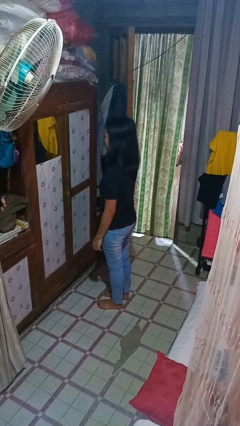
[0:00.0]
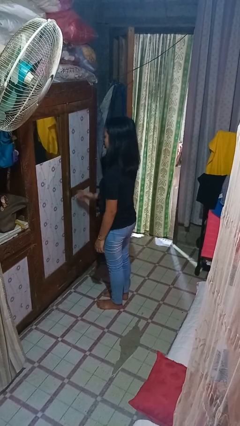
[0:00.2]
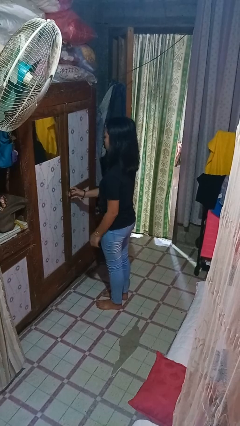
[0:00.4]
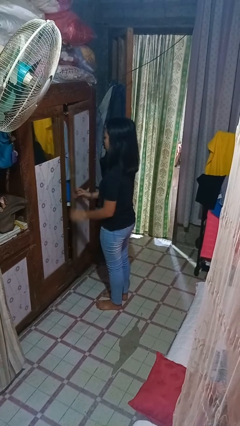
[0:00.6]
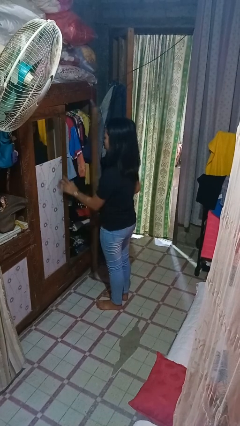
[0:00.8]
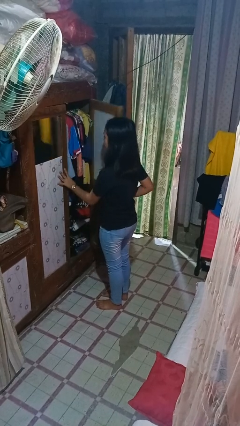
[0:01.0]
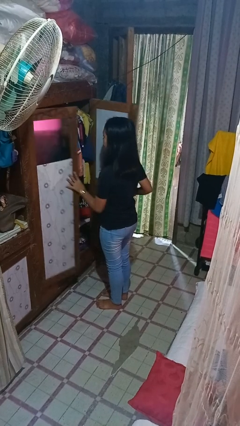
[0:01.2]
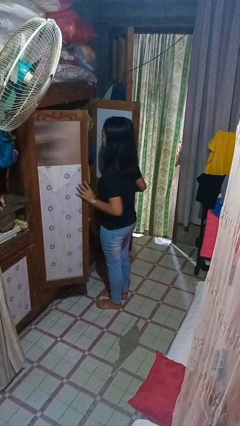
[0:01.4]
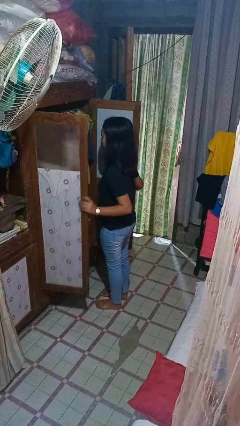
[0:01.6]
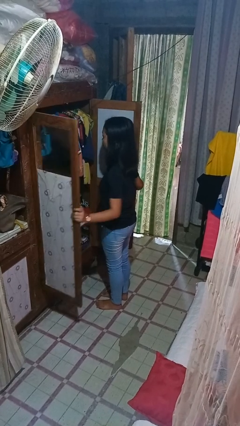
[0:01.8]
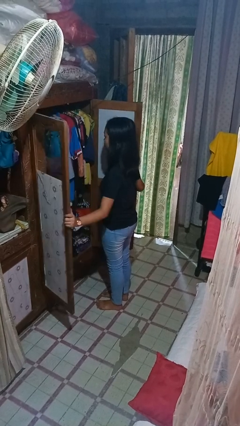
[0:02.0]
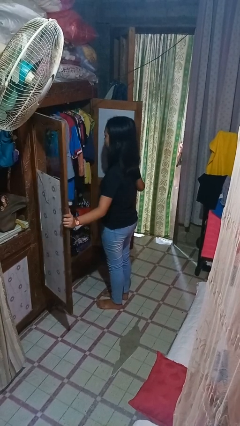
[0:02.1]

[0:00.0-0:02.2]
person opens closet door

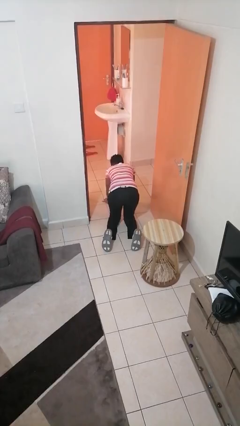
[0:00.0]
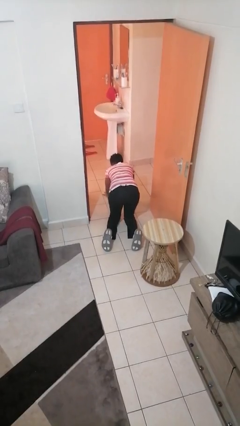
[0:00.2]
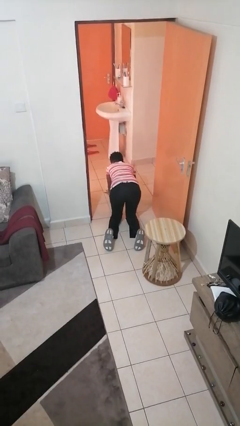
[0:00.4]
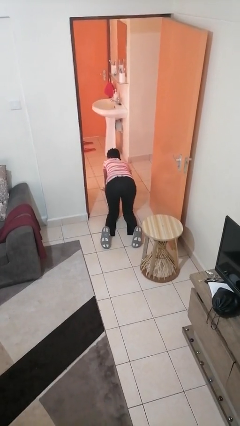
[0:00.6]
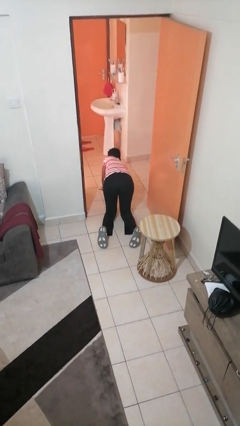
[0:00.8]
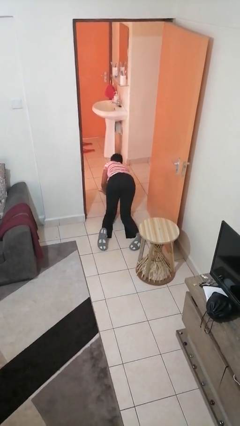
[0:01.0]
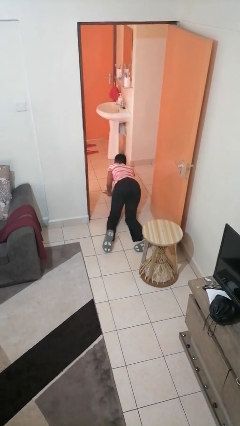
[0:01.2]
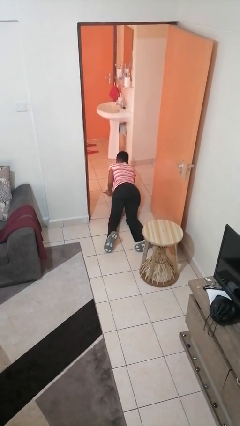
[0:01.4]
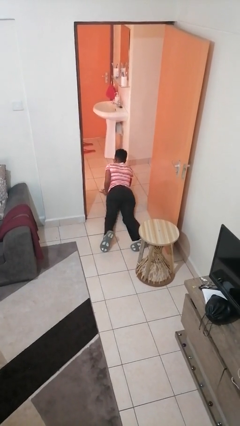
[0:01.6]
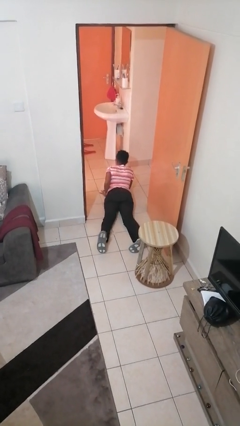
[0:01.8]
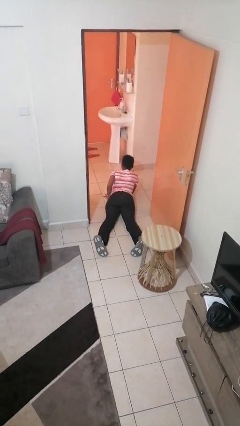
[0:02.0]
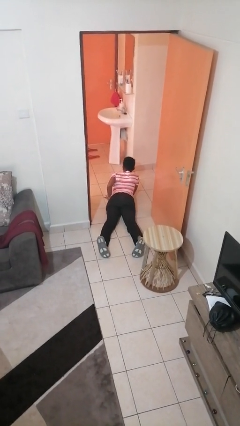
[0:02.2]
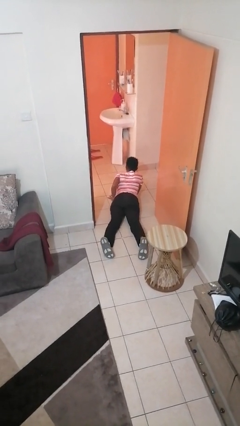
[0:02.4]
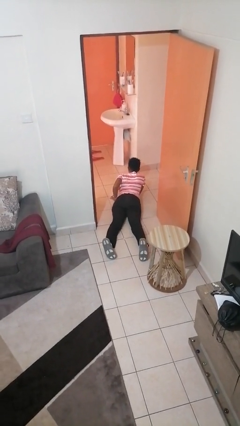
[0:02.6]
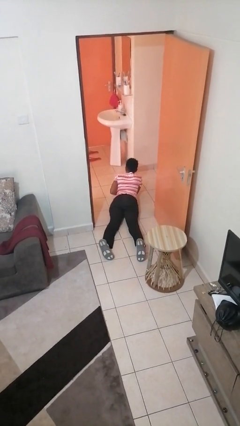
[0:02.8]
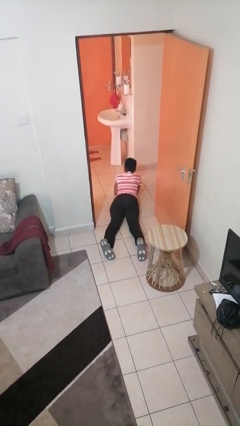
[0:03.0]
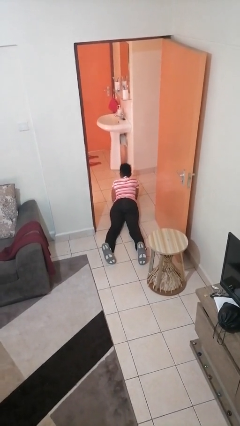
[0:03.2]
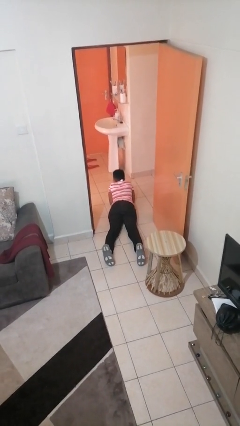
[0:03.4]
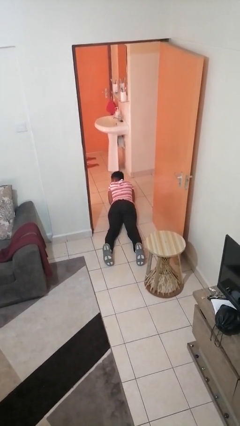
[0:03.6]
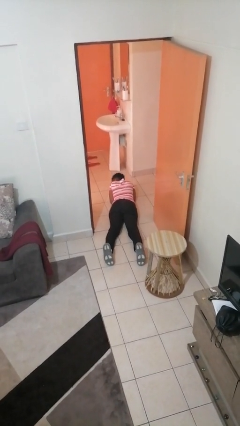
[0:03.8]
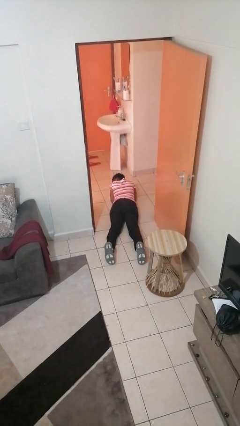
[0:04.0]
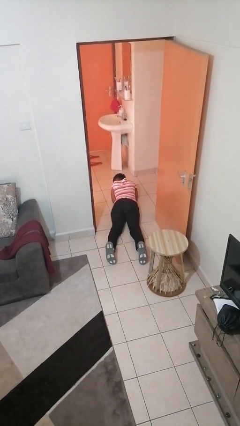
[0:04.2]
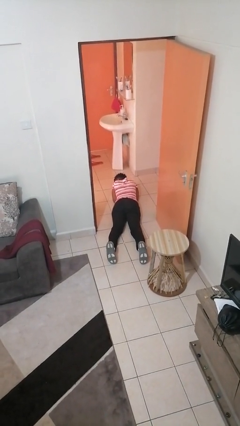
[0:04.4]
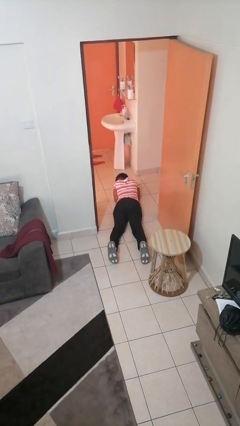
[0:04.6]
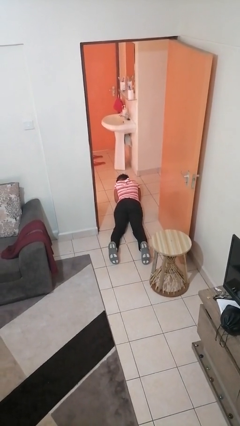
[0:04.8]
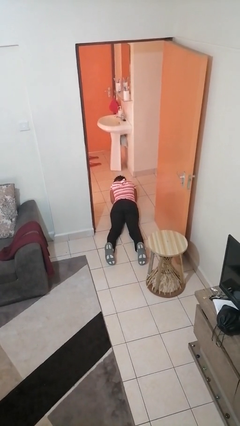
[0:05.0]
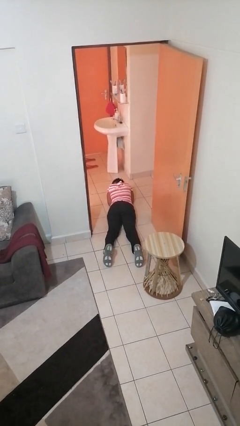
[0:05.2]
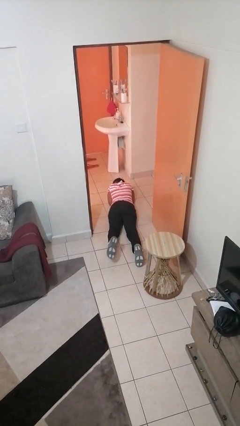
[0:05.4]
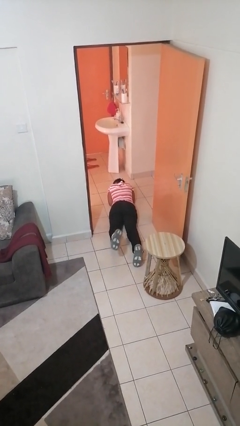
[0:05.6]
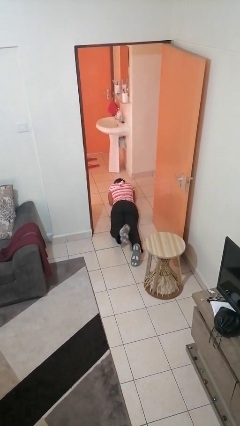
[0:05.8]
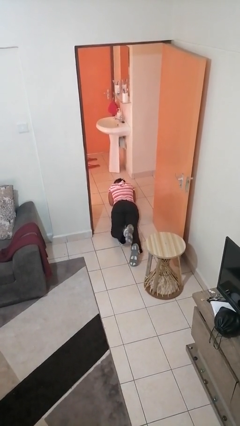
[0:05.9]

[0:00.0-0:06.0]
person lies down on floor

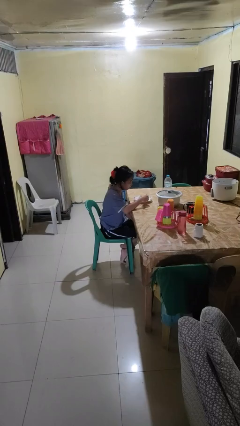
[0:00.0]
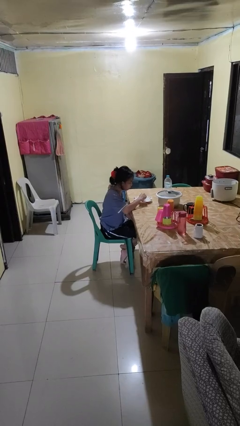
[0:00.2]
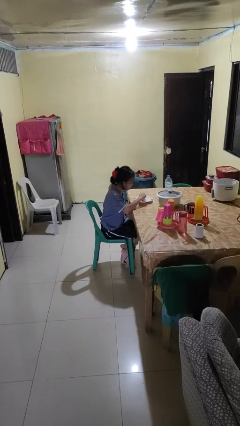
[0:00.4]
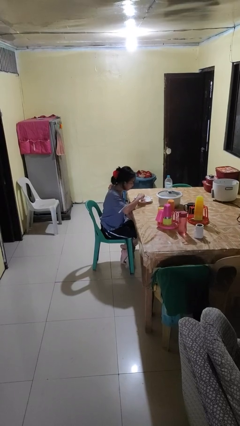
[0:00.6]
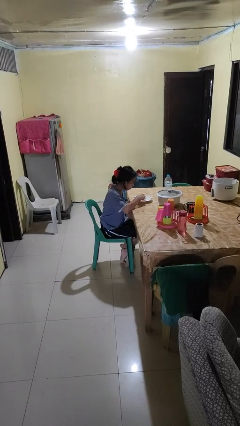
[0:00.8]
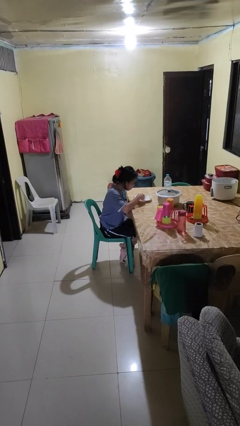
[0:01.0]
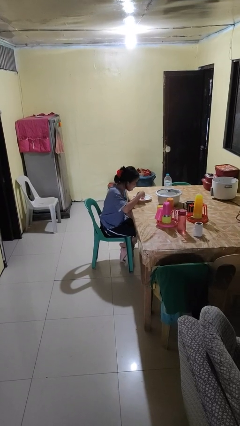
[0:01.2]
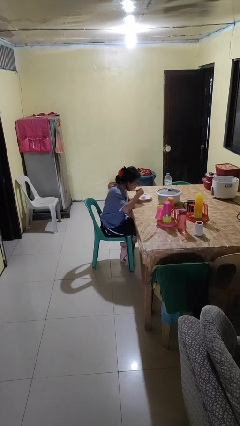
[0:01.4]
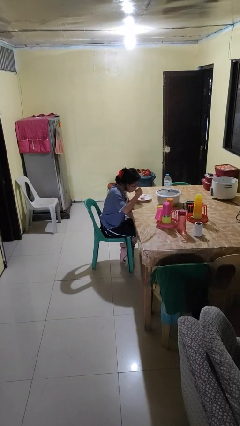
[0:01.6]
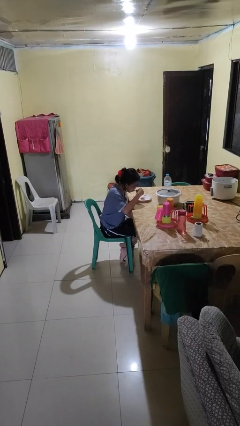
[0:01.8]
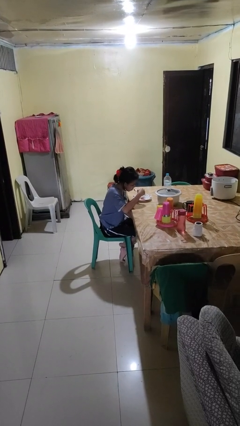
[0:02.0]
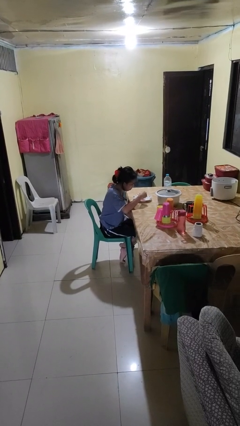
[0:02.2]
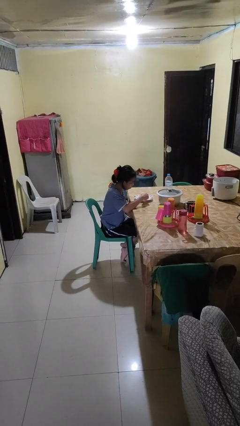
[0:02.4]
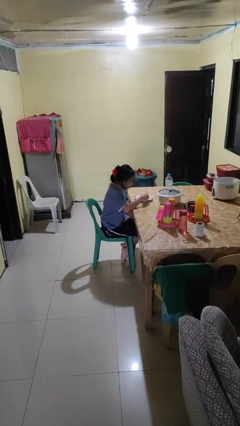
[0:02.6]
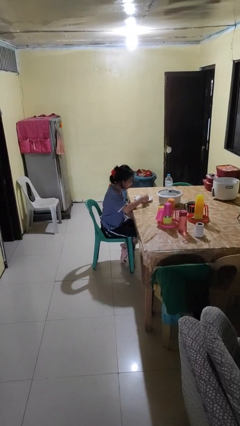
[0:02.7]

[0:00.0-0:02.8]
person eats with utensil

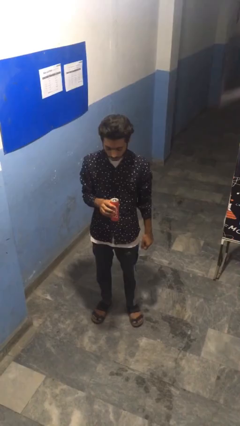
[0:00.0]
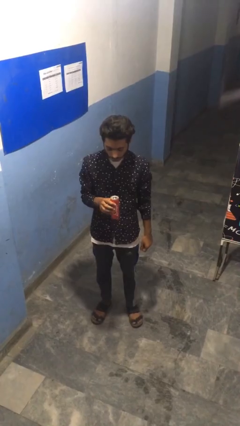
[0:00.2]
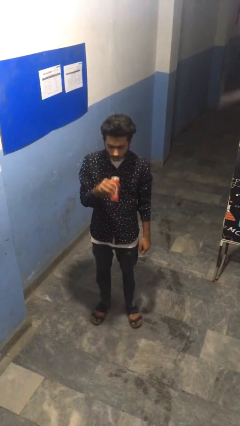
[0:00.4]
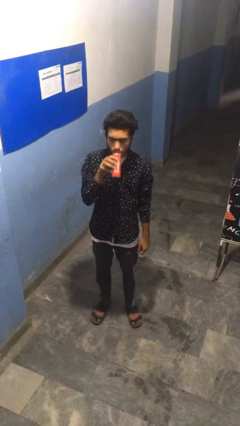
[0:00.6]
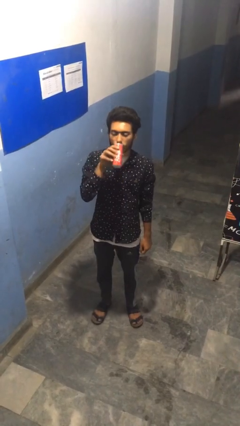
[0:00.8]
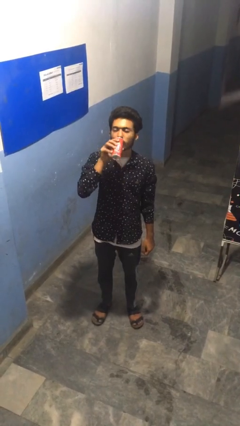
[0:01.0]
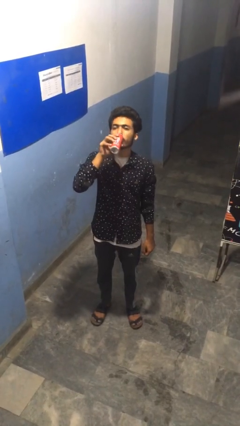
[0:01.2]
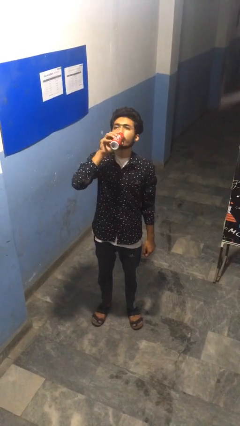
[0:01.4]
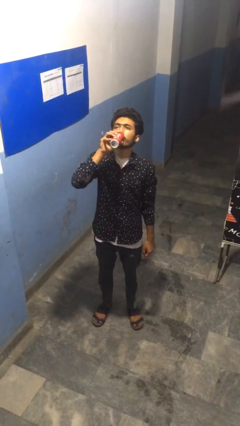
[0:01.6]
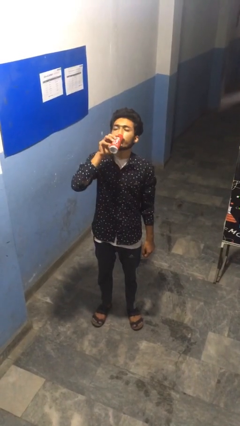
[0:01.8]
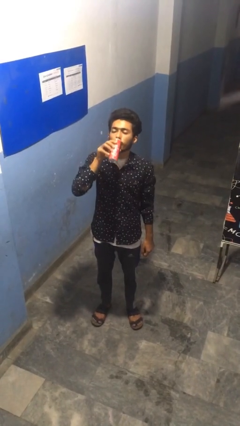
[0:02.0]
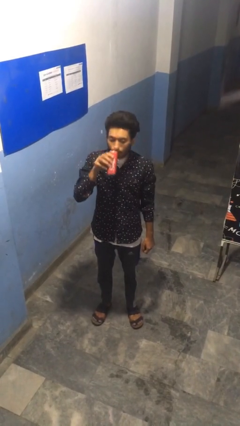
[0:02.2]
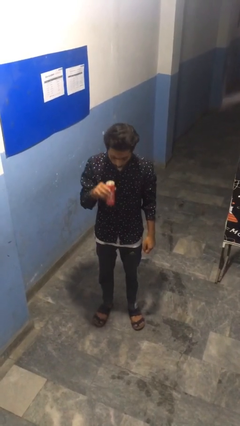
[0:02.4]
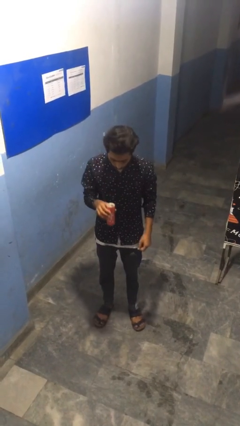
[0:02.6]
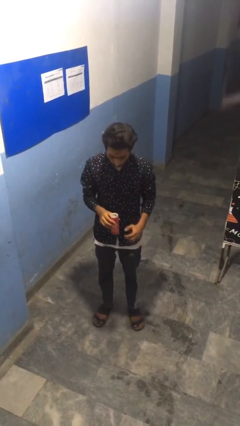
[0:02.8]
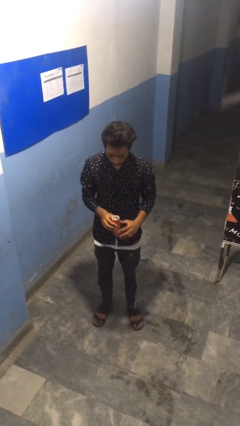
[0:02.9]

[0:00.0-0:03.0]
person drinks from beverage can

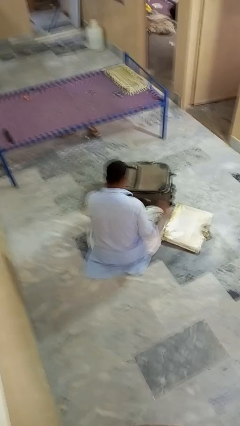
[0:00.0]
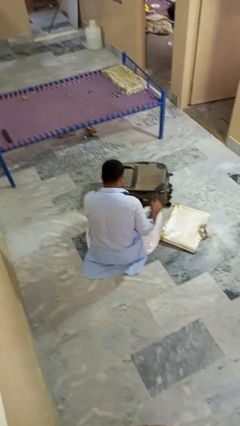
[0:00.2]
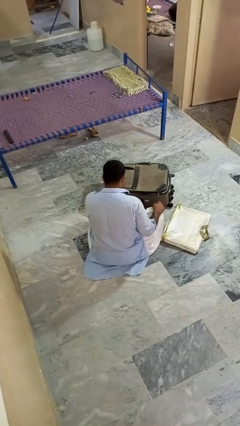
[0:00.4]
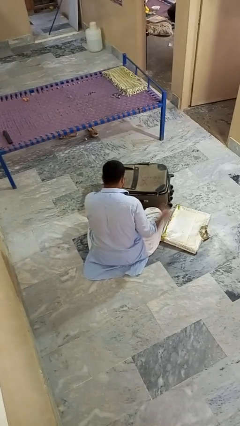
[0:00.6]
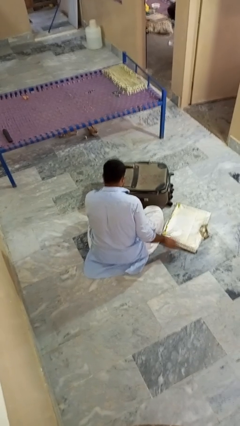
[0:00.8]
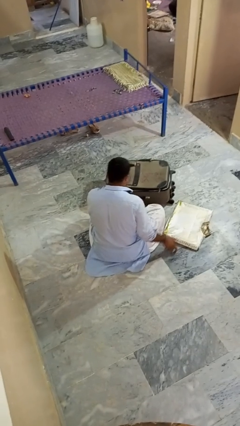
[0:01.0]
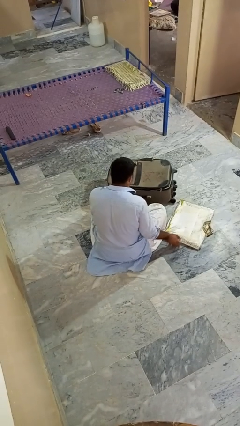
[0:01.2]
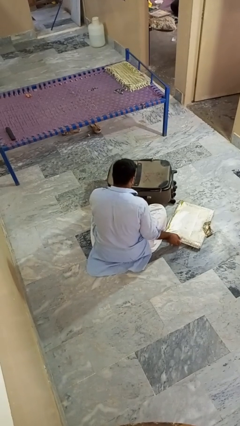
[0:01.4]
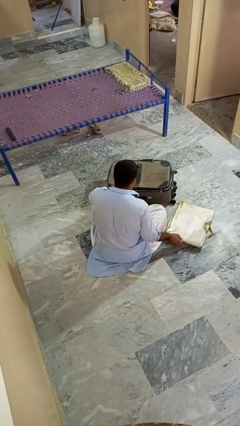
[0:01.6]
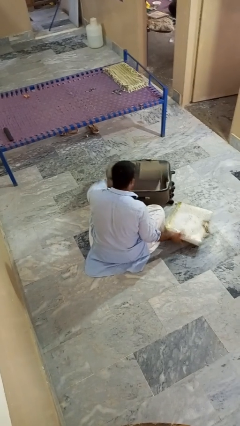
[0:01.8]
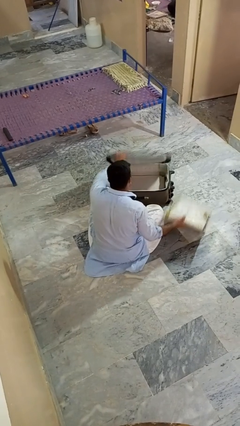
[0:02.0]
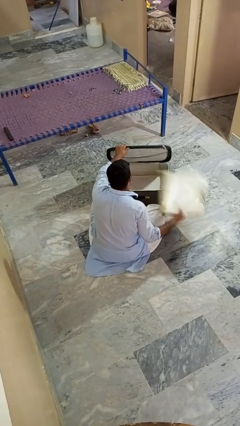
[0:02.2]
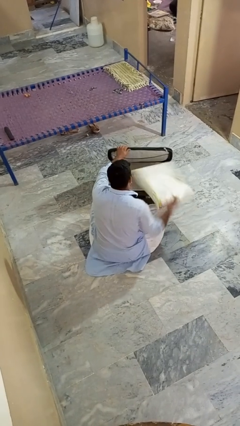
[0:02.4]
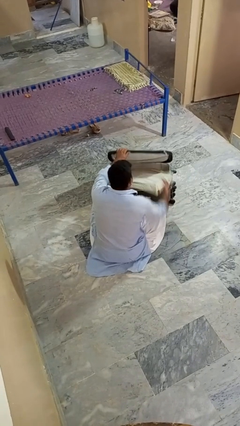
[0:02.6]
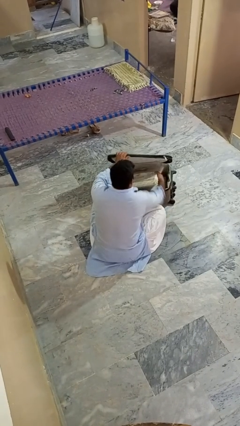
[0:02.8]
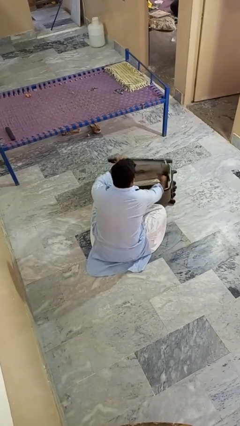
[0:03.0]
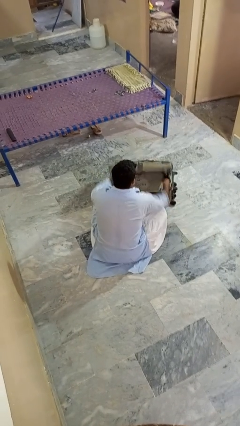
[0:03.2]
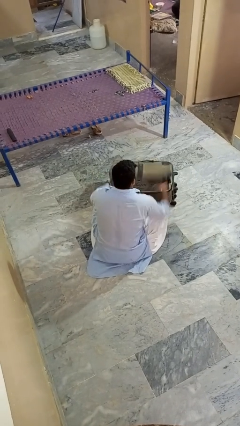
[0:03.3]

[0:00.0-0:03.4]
person puts object into bag

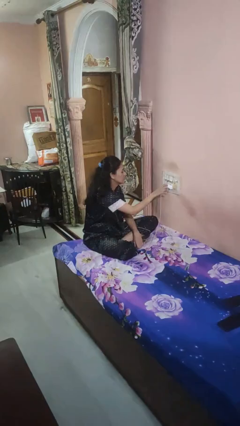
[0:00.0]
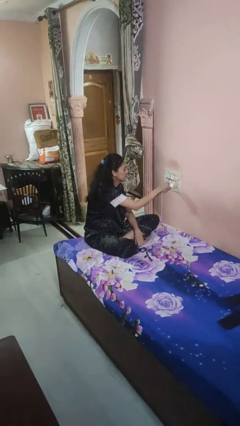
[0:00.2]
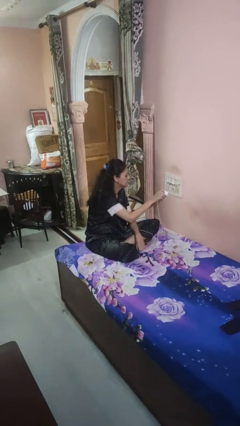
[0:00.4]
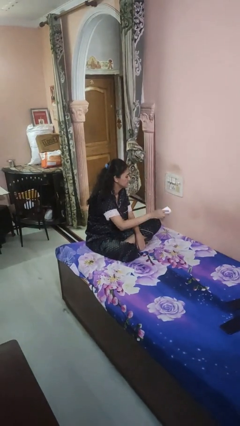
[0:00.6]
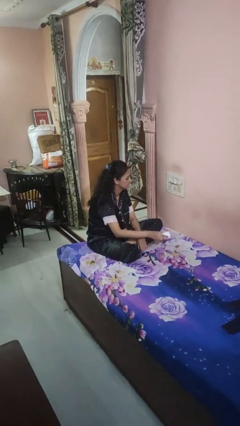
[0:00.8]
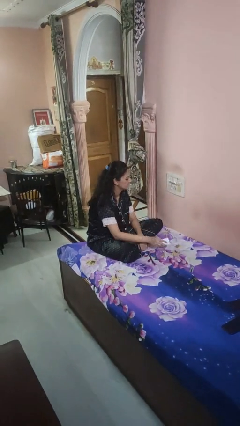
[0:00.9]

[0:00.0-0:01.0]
person unplugs from electrical socket
